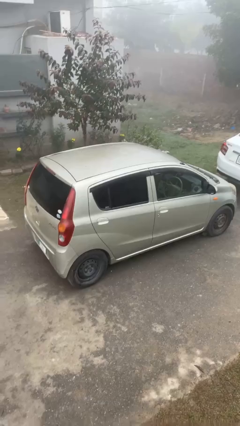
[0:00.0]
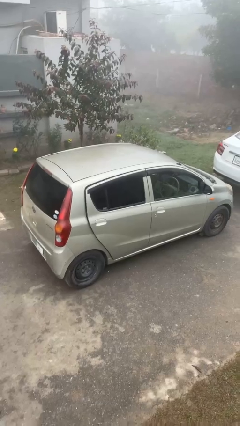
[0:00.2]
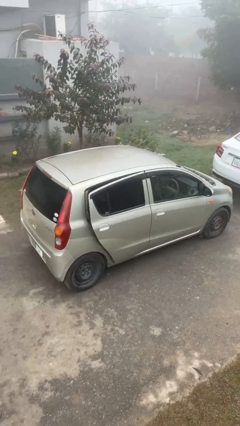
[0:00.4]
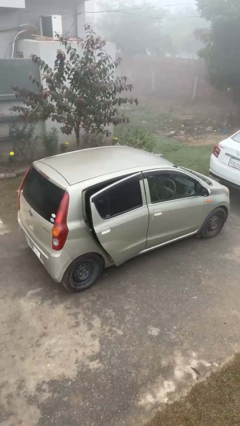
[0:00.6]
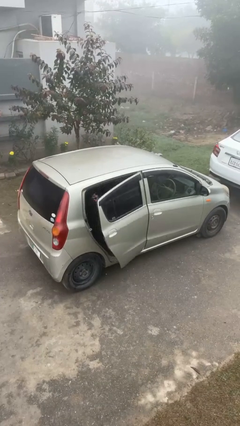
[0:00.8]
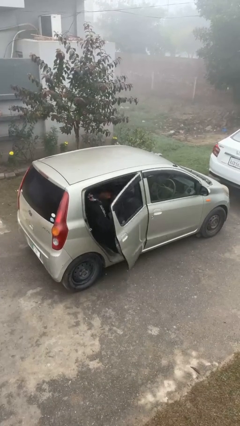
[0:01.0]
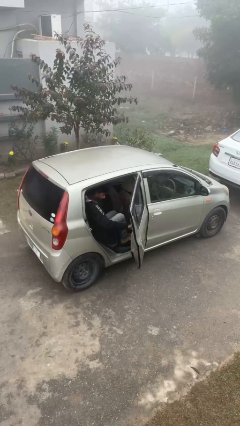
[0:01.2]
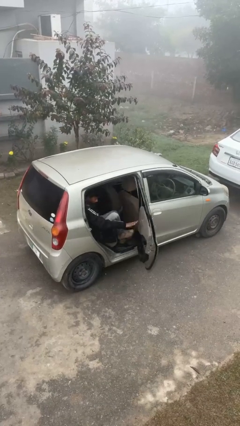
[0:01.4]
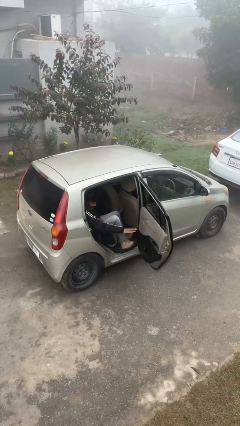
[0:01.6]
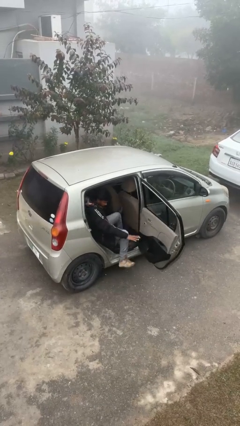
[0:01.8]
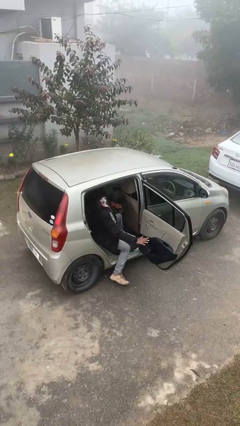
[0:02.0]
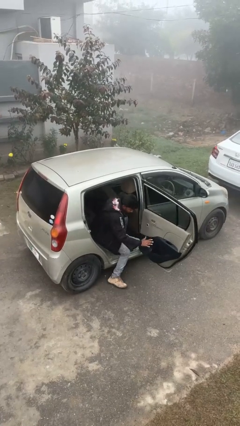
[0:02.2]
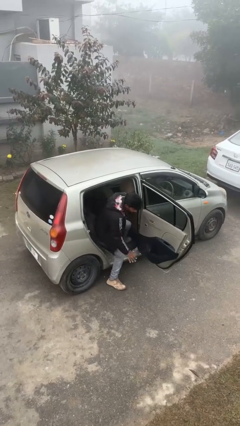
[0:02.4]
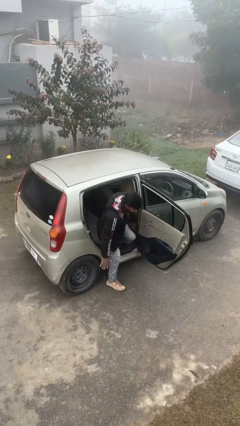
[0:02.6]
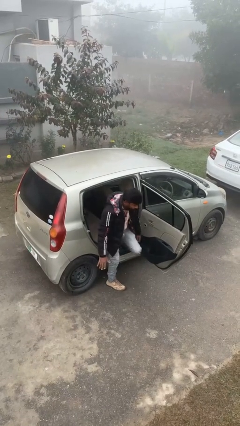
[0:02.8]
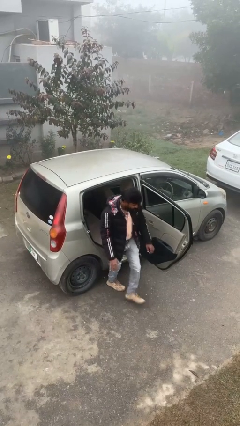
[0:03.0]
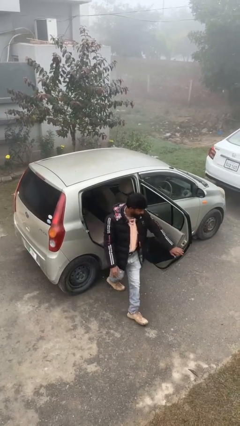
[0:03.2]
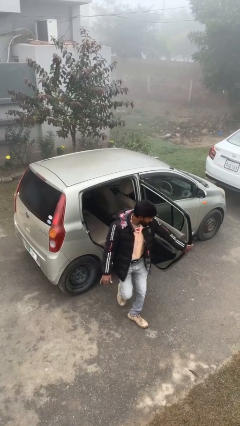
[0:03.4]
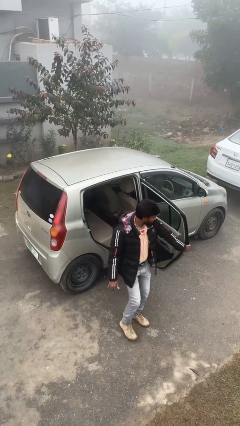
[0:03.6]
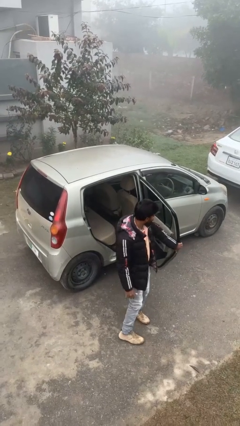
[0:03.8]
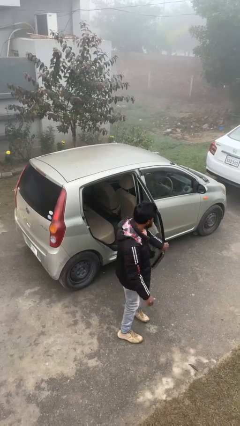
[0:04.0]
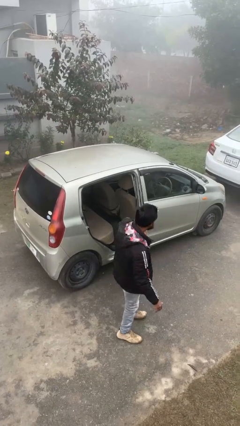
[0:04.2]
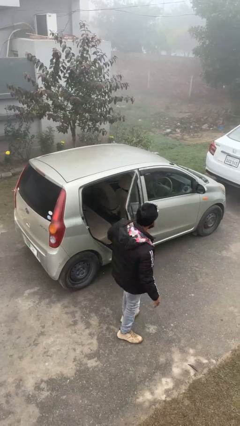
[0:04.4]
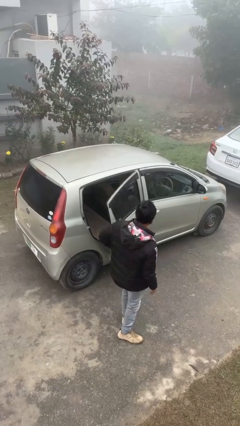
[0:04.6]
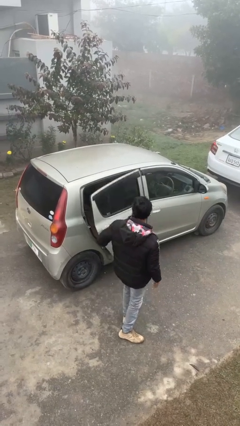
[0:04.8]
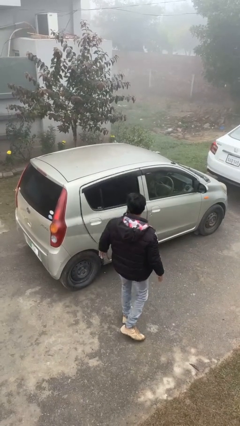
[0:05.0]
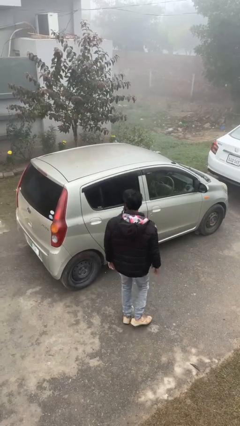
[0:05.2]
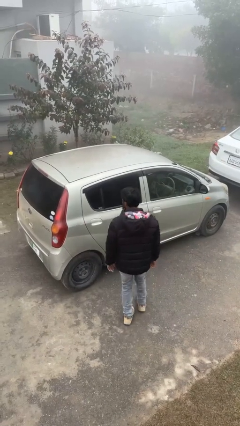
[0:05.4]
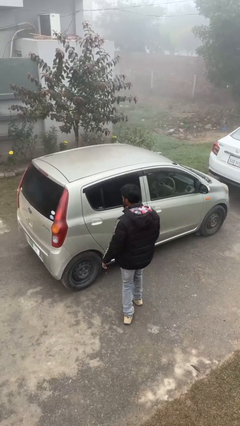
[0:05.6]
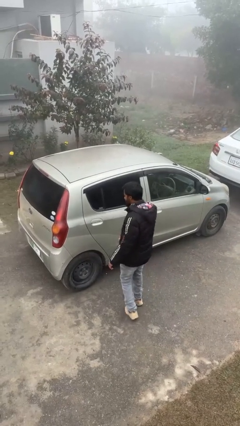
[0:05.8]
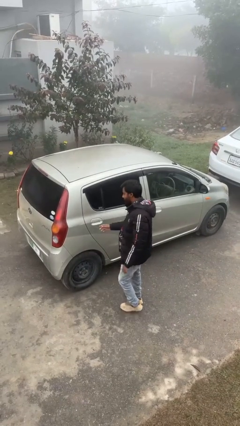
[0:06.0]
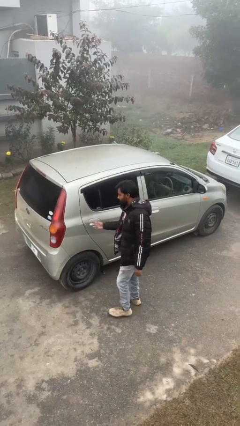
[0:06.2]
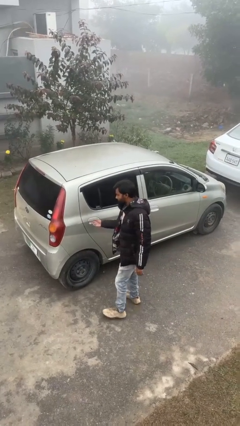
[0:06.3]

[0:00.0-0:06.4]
car drops off person

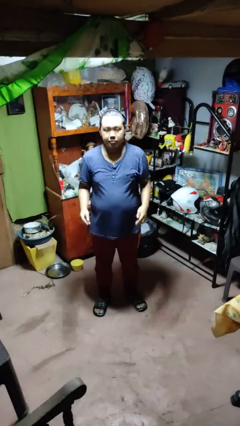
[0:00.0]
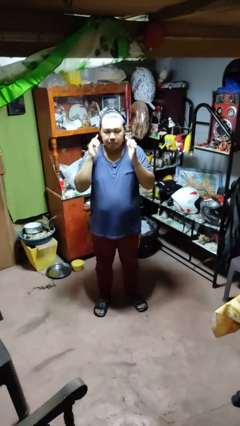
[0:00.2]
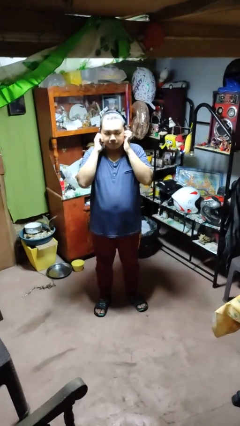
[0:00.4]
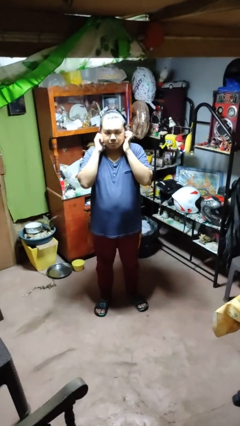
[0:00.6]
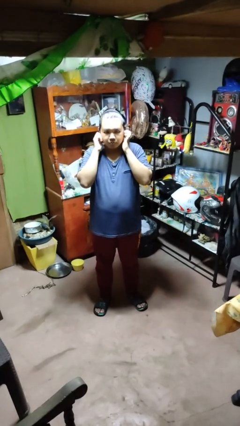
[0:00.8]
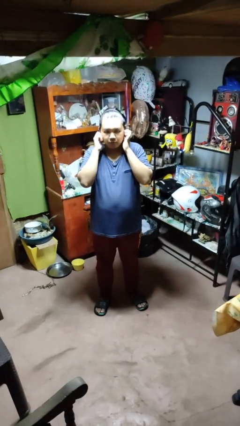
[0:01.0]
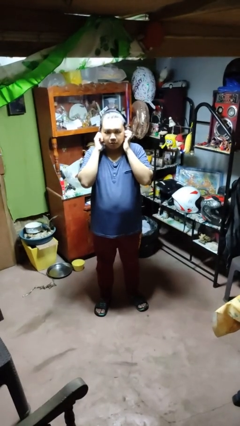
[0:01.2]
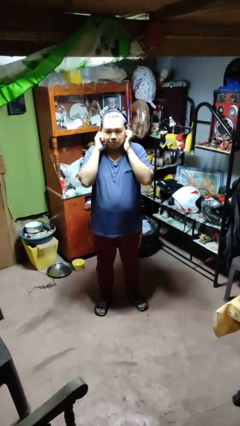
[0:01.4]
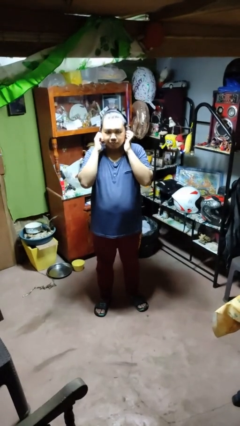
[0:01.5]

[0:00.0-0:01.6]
person puts fingers in ear

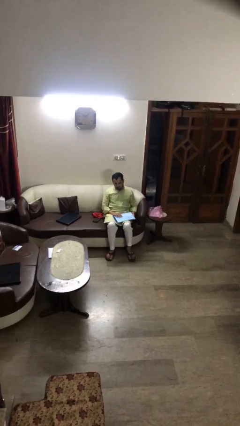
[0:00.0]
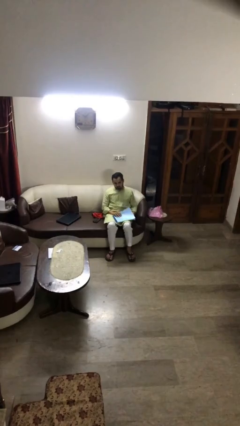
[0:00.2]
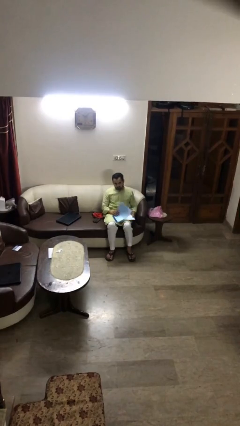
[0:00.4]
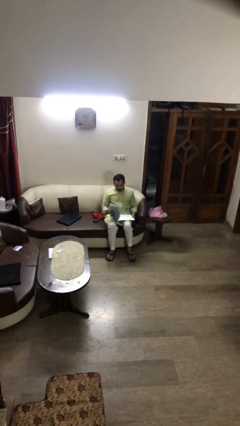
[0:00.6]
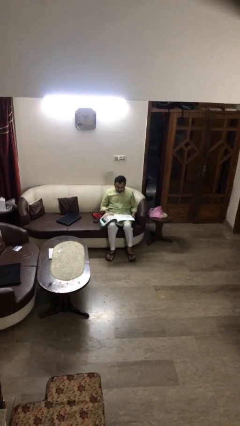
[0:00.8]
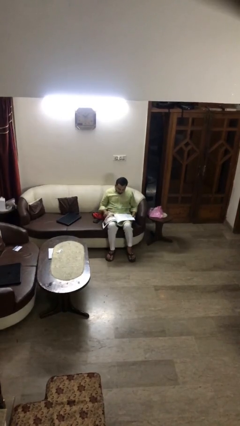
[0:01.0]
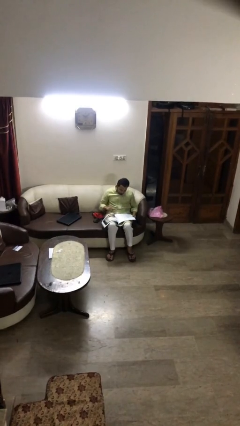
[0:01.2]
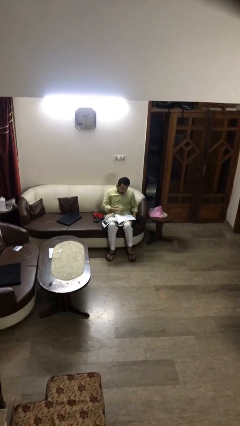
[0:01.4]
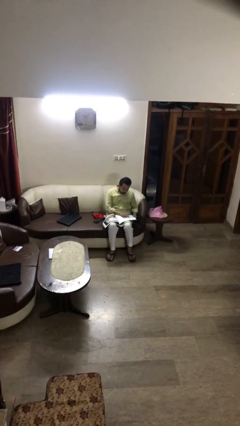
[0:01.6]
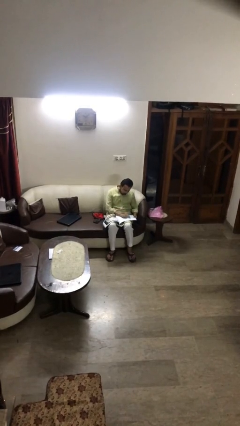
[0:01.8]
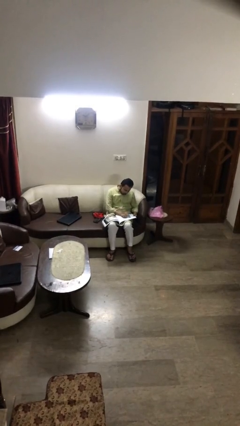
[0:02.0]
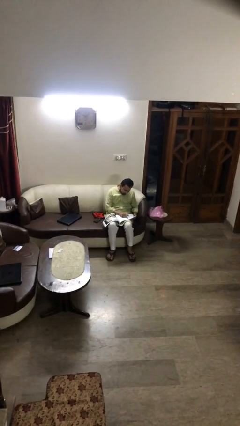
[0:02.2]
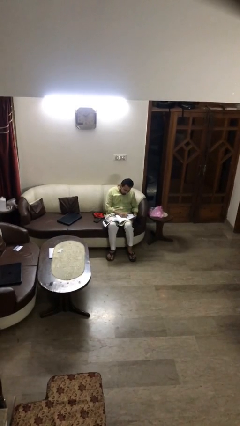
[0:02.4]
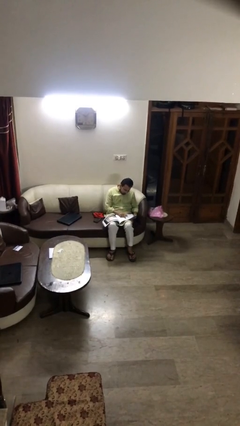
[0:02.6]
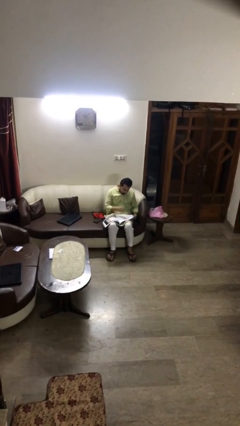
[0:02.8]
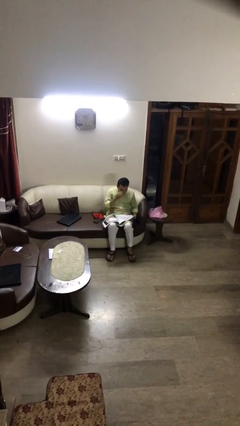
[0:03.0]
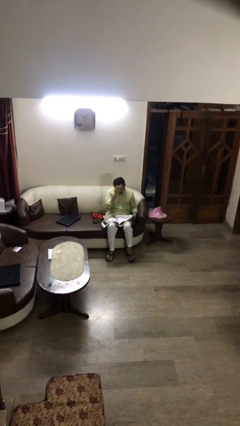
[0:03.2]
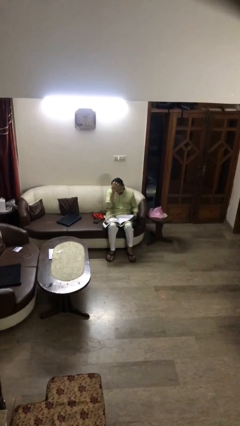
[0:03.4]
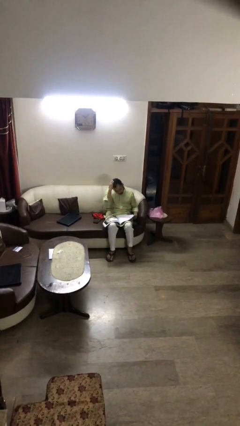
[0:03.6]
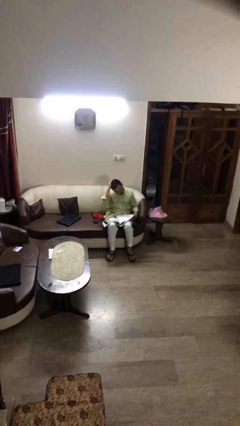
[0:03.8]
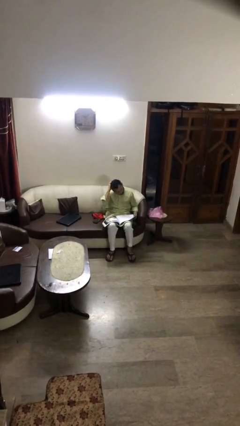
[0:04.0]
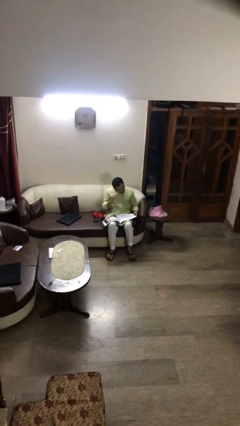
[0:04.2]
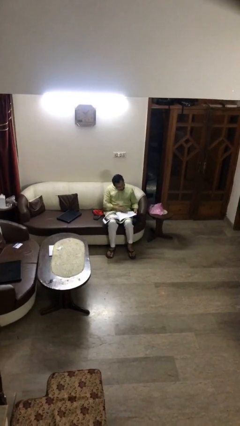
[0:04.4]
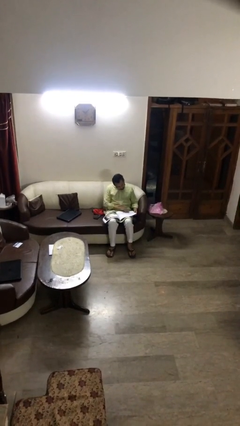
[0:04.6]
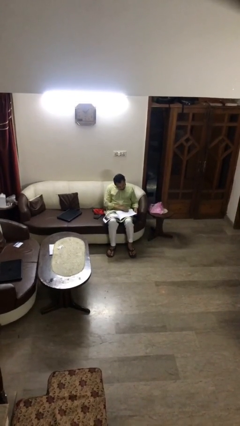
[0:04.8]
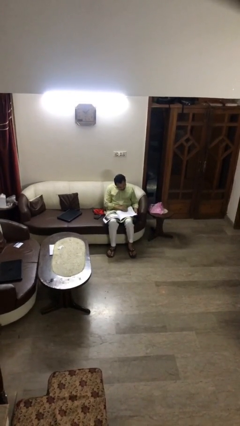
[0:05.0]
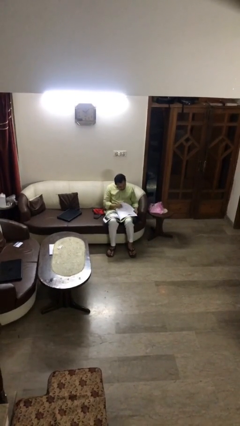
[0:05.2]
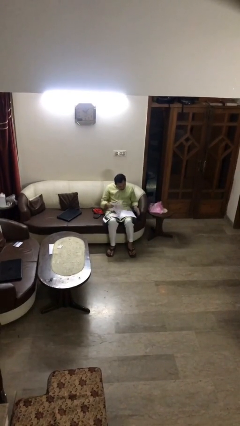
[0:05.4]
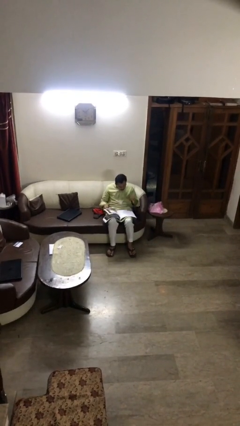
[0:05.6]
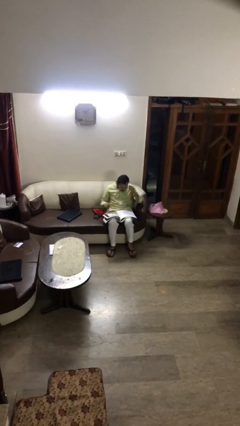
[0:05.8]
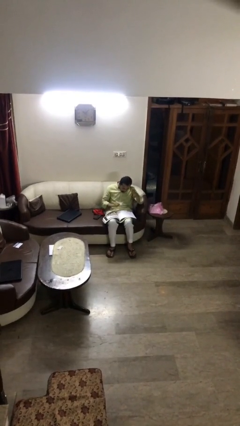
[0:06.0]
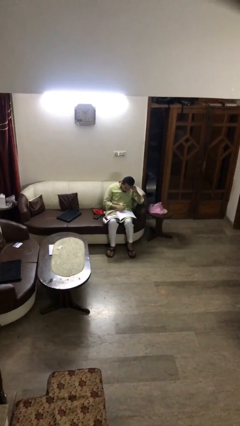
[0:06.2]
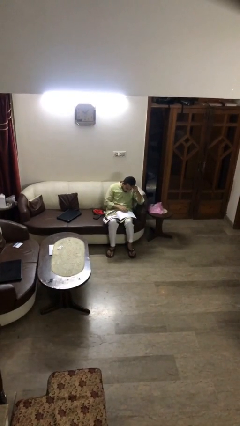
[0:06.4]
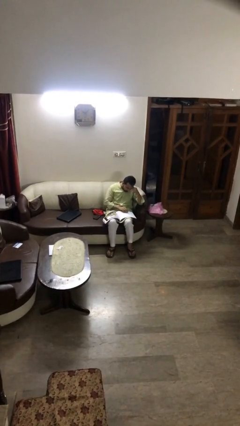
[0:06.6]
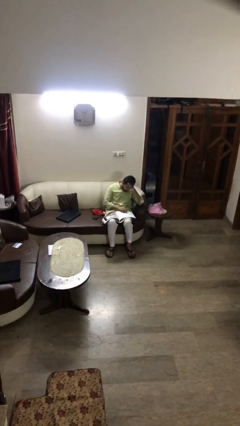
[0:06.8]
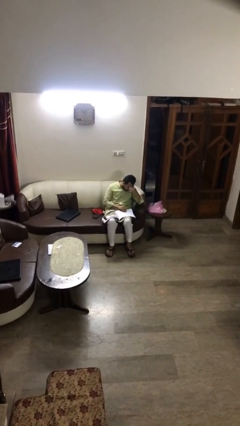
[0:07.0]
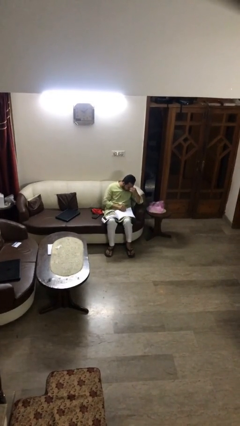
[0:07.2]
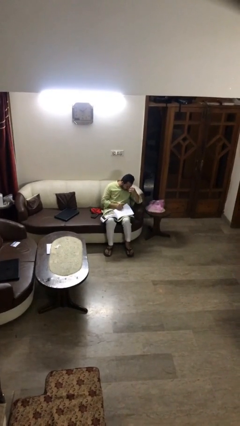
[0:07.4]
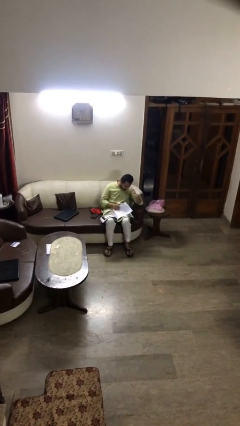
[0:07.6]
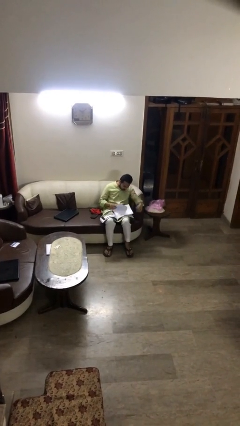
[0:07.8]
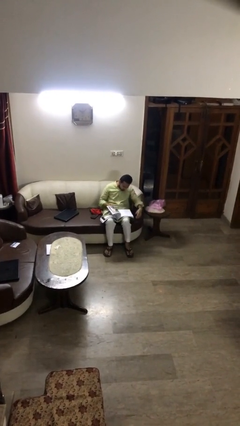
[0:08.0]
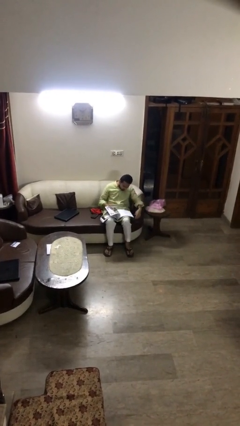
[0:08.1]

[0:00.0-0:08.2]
person reads document

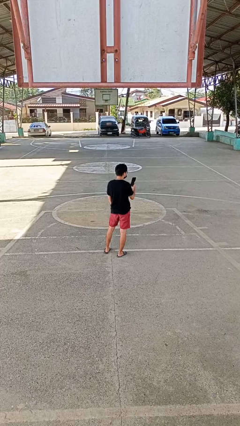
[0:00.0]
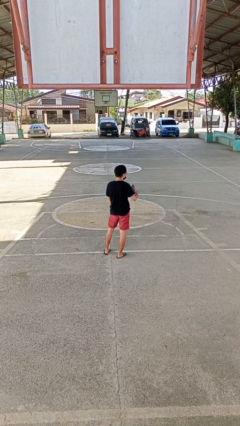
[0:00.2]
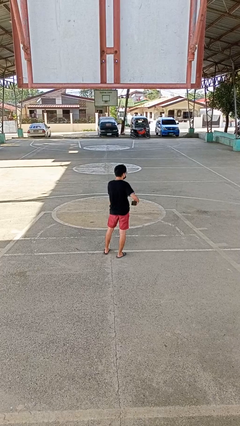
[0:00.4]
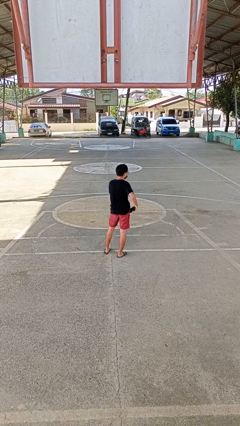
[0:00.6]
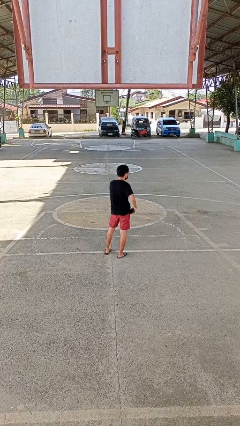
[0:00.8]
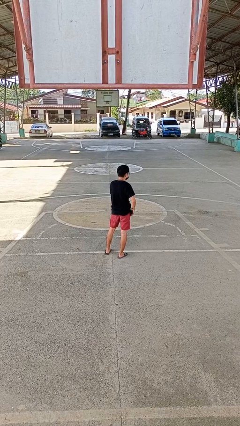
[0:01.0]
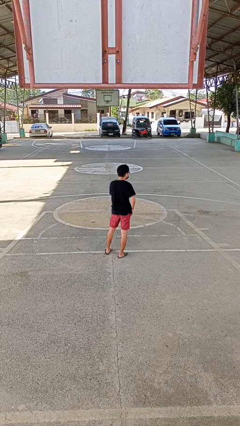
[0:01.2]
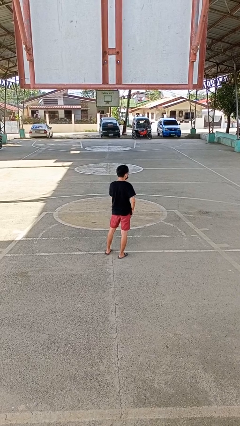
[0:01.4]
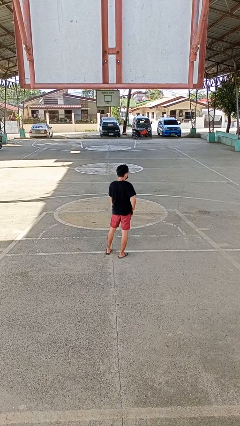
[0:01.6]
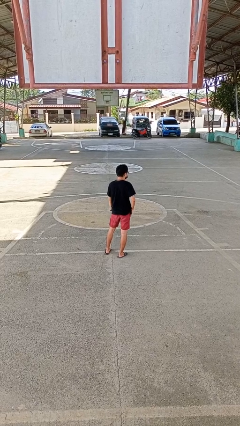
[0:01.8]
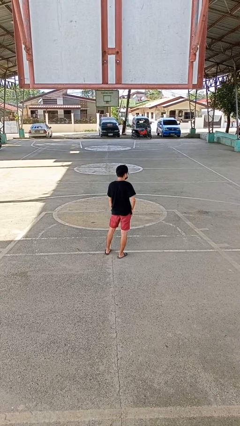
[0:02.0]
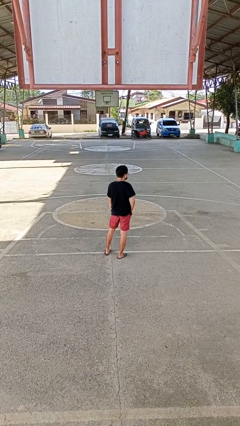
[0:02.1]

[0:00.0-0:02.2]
person puts phone into pocket
